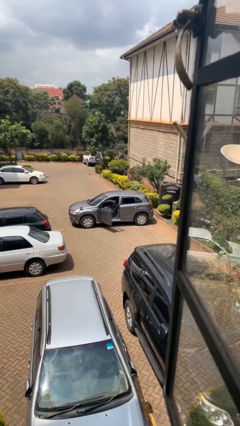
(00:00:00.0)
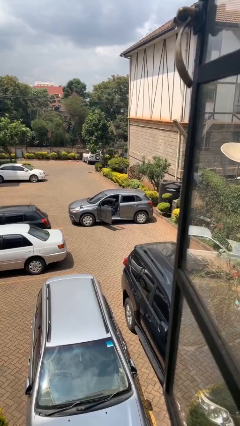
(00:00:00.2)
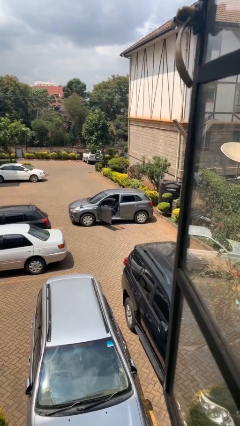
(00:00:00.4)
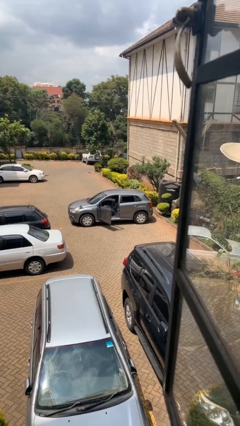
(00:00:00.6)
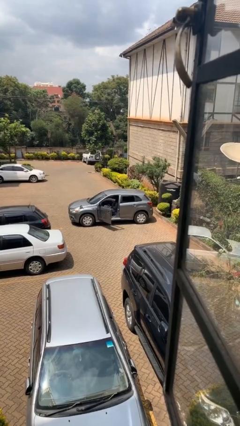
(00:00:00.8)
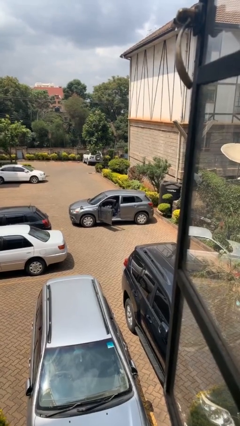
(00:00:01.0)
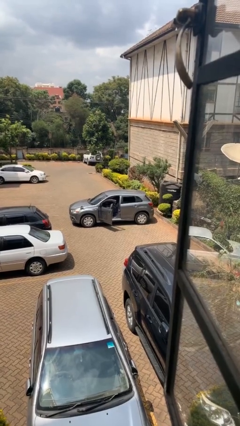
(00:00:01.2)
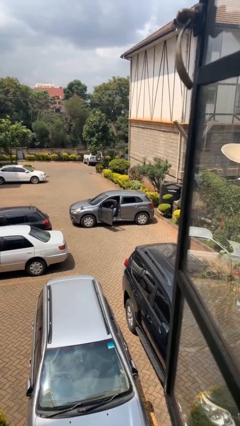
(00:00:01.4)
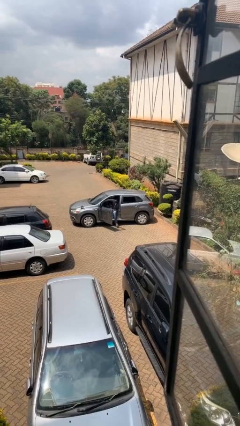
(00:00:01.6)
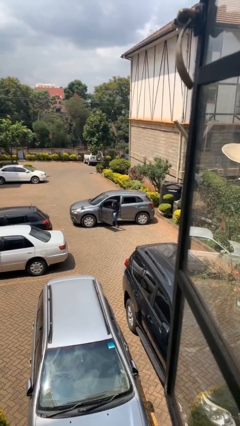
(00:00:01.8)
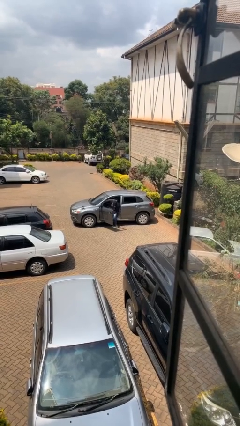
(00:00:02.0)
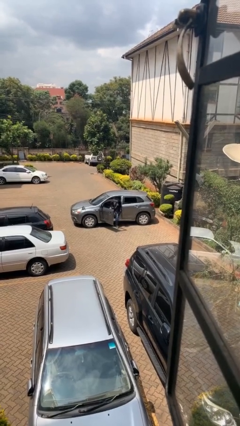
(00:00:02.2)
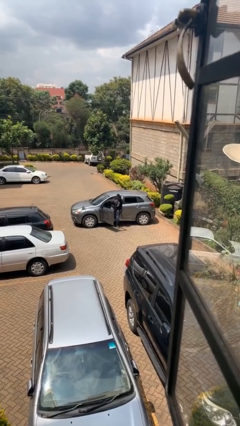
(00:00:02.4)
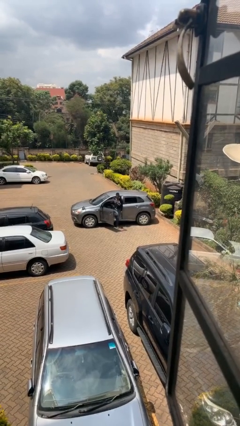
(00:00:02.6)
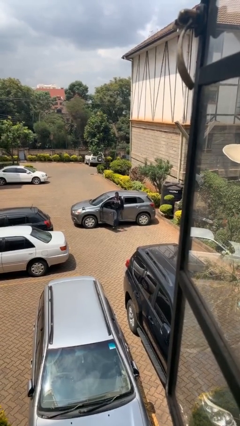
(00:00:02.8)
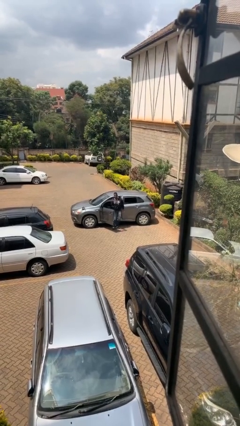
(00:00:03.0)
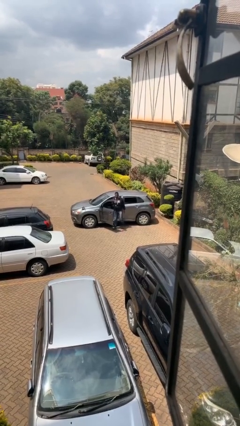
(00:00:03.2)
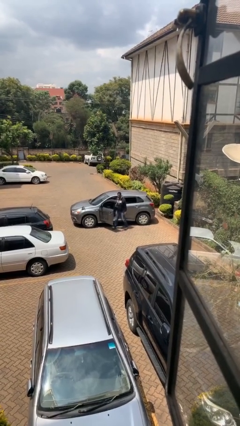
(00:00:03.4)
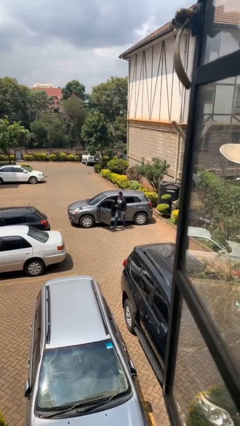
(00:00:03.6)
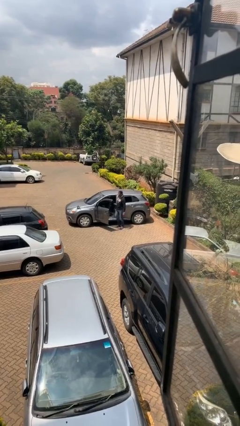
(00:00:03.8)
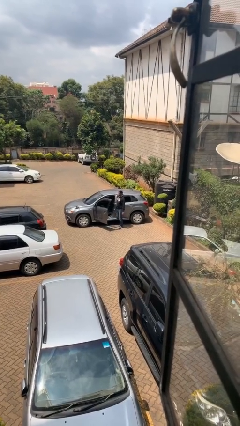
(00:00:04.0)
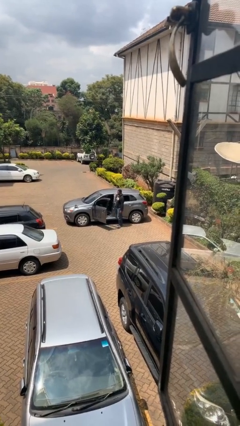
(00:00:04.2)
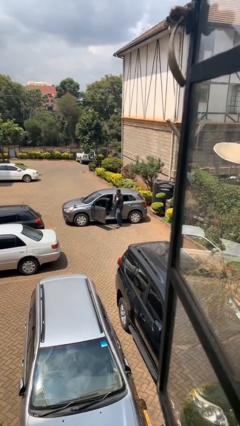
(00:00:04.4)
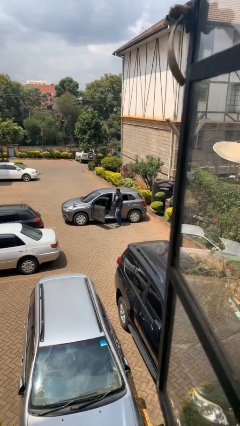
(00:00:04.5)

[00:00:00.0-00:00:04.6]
person exits car

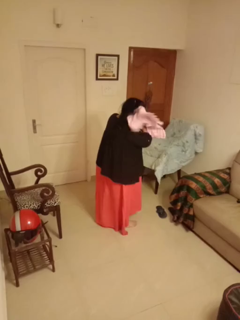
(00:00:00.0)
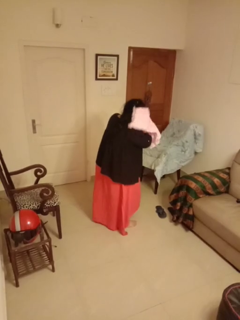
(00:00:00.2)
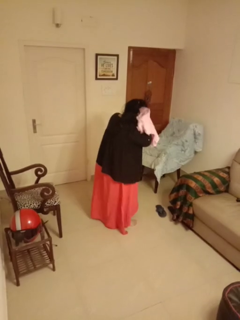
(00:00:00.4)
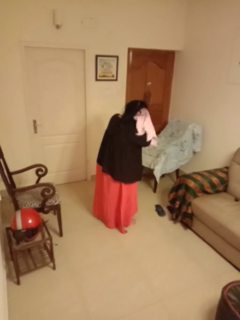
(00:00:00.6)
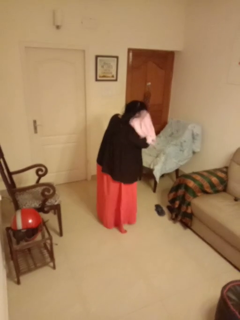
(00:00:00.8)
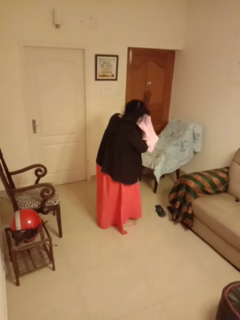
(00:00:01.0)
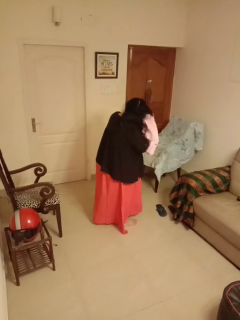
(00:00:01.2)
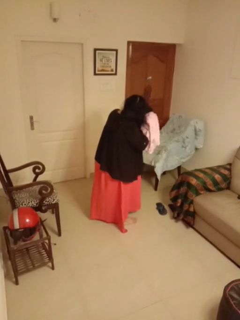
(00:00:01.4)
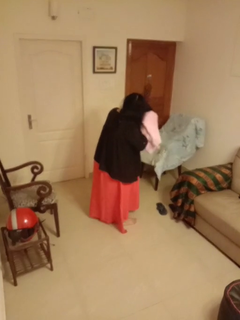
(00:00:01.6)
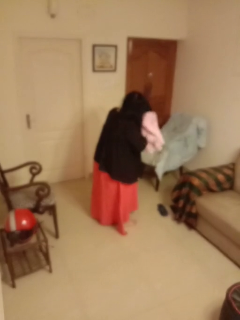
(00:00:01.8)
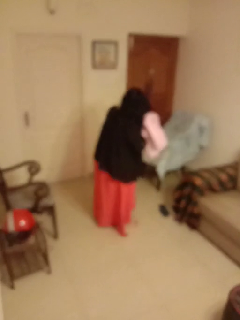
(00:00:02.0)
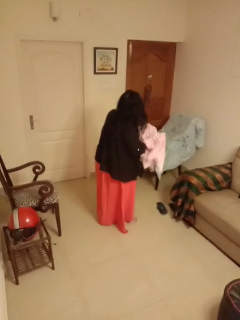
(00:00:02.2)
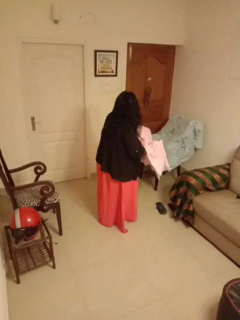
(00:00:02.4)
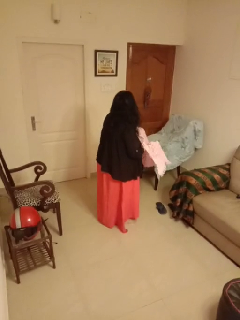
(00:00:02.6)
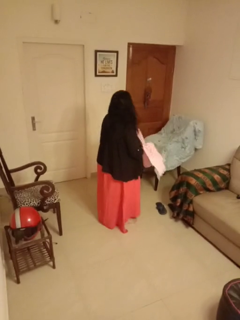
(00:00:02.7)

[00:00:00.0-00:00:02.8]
person dries hair with towel

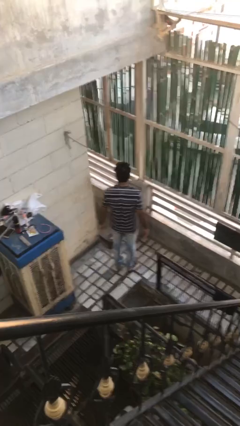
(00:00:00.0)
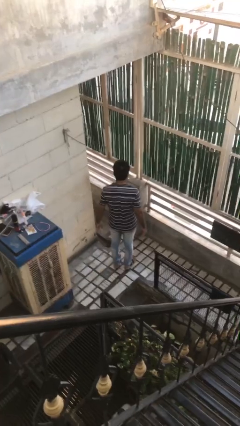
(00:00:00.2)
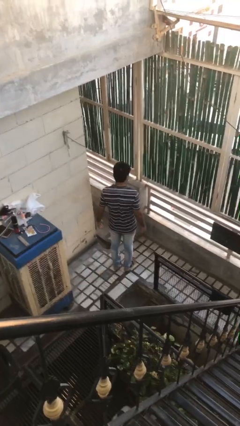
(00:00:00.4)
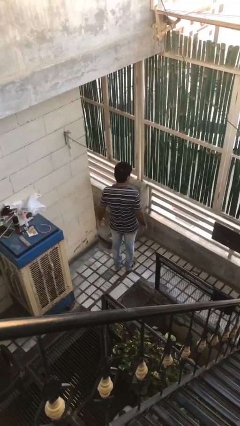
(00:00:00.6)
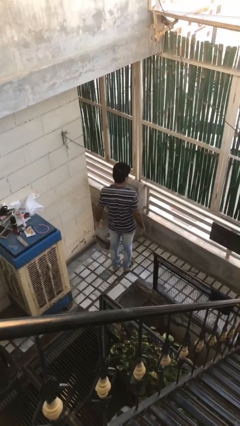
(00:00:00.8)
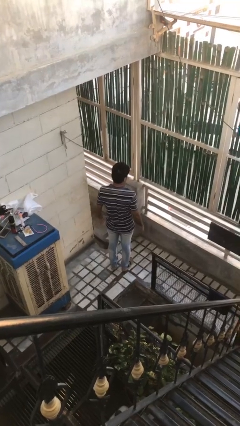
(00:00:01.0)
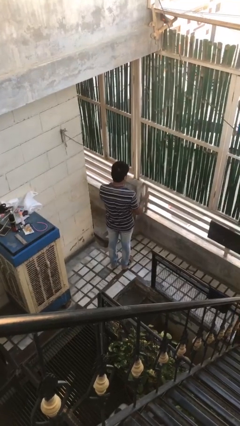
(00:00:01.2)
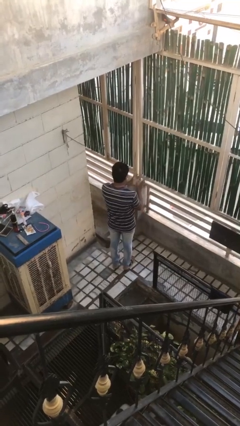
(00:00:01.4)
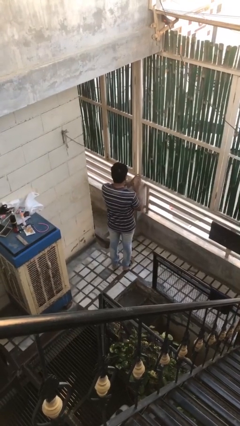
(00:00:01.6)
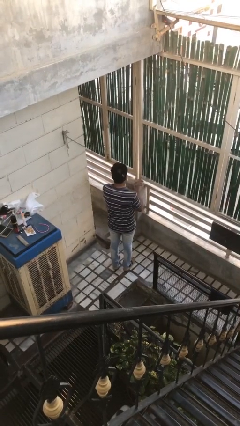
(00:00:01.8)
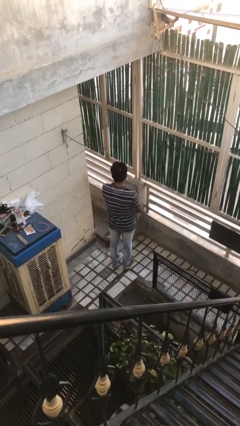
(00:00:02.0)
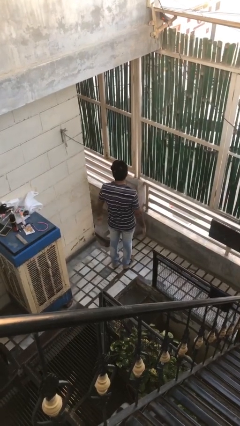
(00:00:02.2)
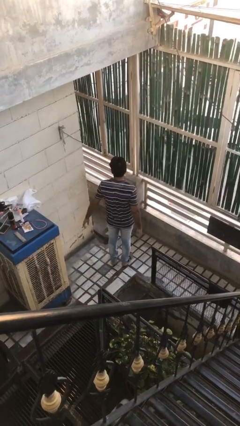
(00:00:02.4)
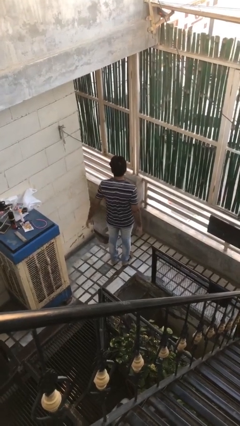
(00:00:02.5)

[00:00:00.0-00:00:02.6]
person claps hands

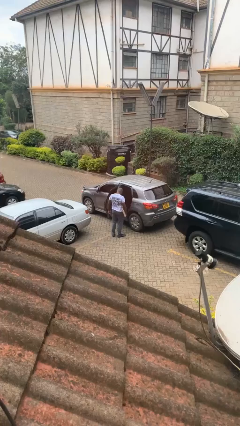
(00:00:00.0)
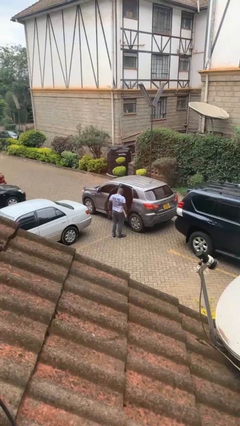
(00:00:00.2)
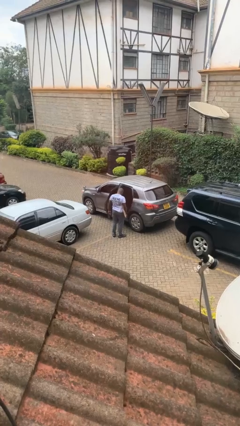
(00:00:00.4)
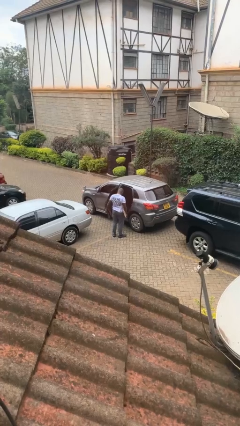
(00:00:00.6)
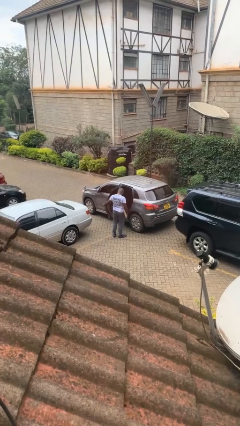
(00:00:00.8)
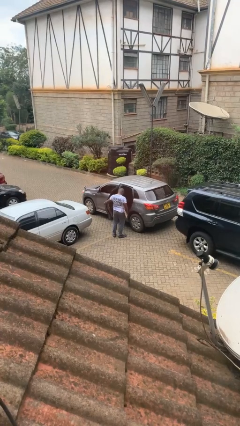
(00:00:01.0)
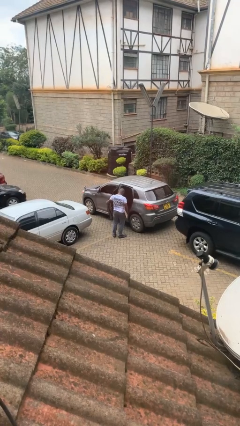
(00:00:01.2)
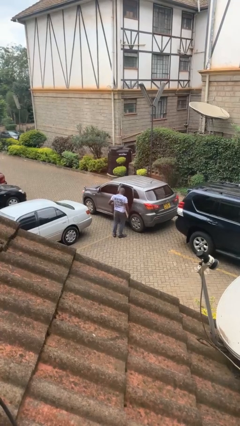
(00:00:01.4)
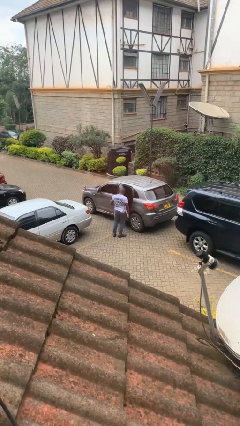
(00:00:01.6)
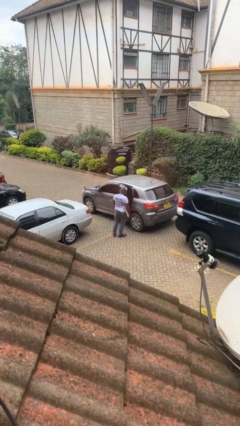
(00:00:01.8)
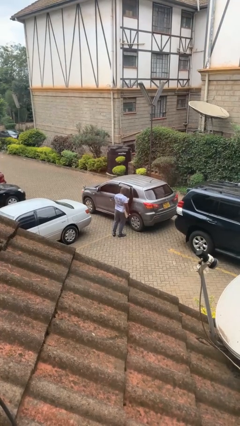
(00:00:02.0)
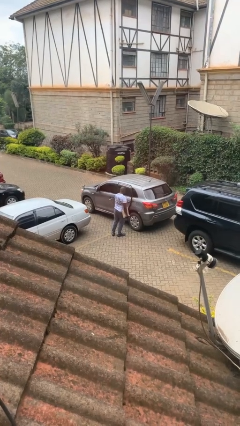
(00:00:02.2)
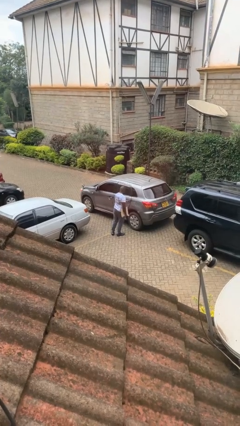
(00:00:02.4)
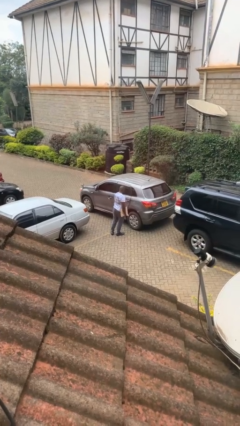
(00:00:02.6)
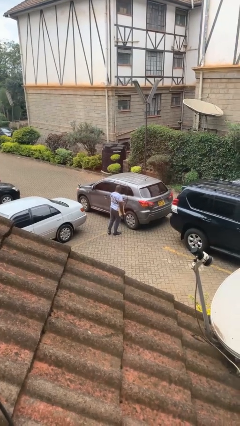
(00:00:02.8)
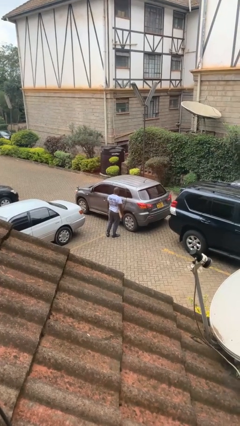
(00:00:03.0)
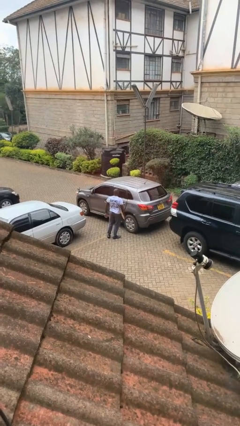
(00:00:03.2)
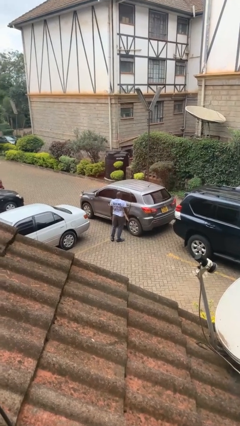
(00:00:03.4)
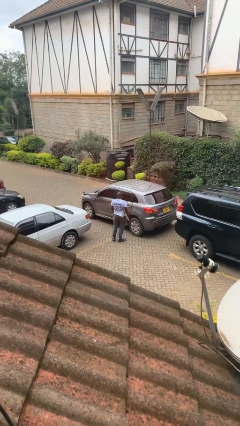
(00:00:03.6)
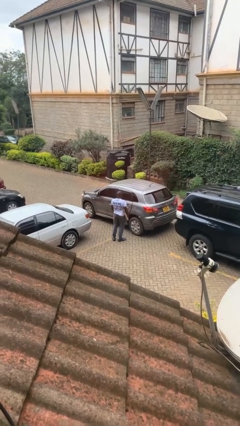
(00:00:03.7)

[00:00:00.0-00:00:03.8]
person closes car door

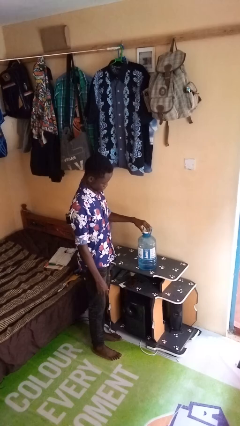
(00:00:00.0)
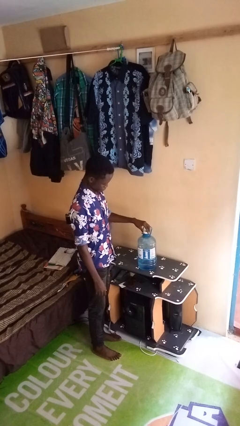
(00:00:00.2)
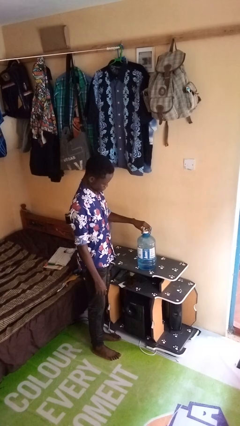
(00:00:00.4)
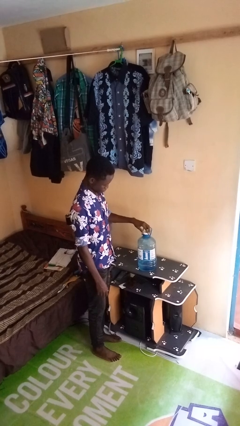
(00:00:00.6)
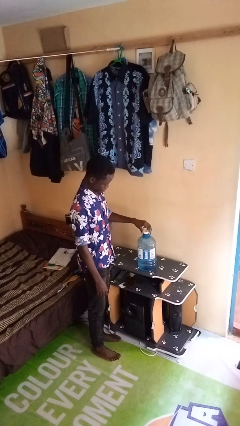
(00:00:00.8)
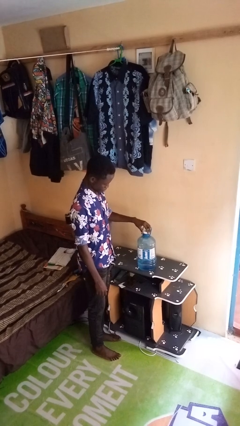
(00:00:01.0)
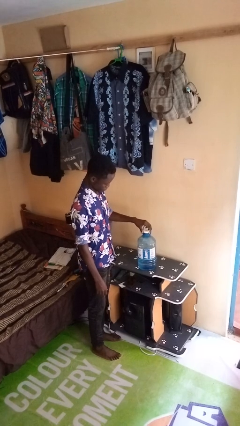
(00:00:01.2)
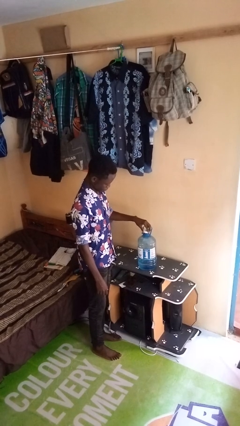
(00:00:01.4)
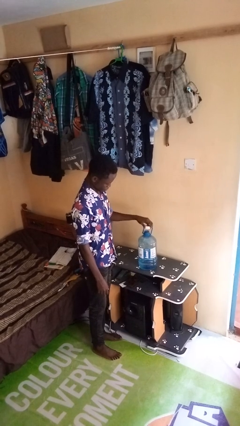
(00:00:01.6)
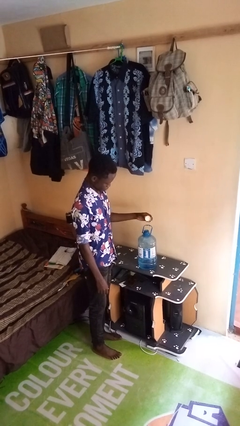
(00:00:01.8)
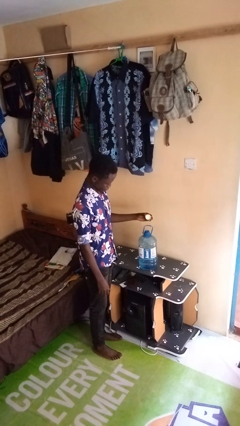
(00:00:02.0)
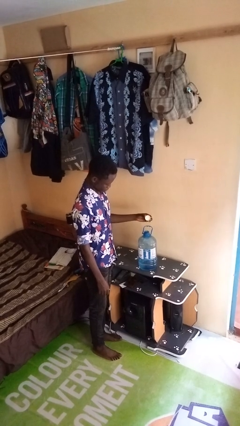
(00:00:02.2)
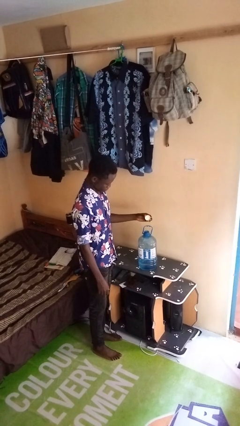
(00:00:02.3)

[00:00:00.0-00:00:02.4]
person unscrews lid from bottle

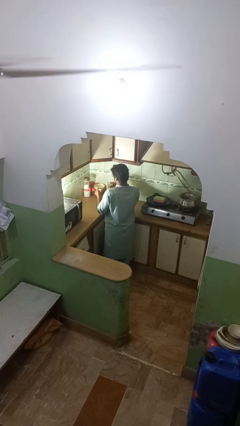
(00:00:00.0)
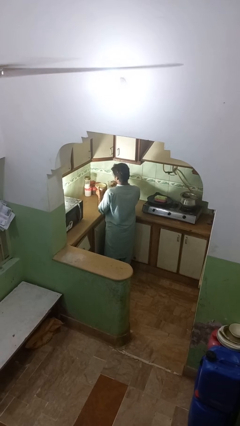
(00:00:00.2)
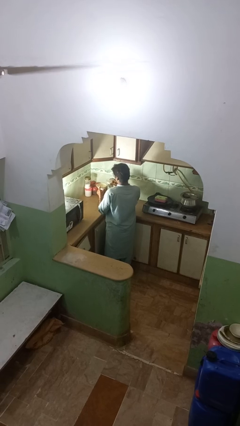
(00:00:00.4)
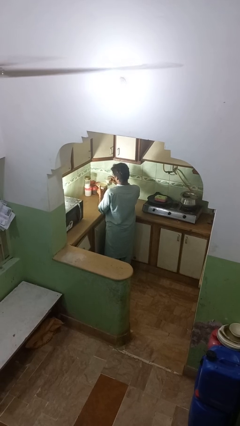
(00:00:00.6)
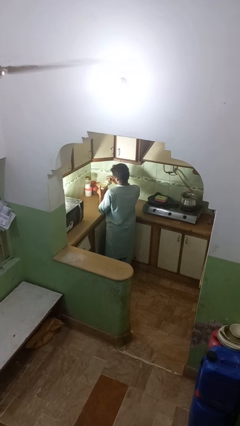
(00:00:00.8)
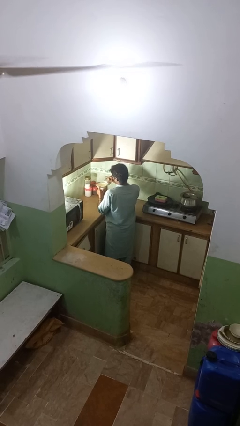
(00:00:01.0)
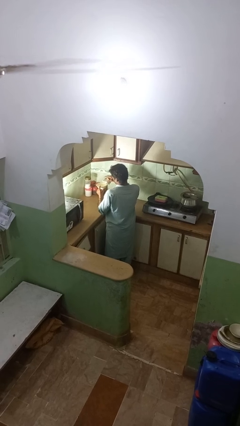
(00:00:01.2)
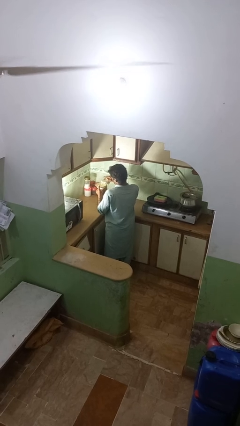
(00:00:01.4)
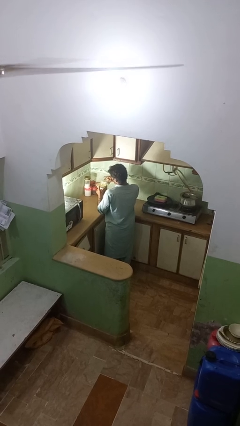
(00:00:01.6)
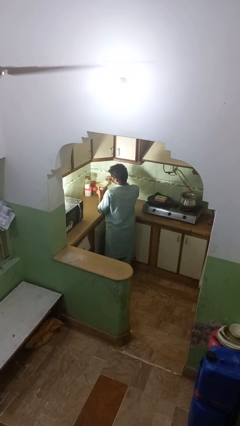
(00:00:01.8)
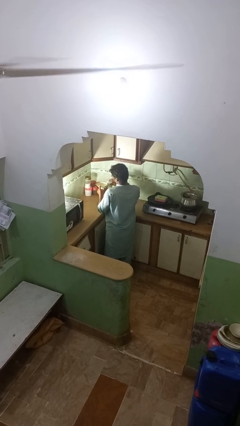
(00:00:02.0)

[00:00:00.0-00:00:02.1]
person pours into bowl

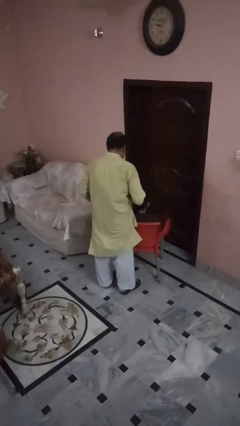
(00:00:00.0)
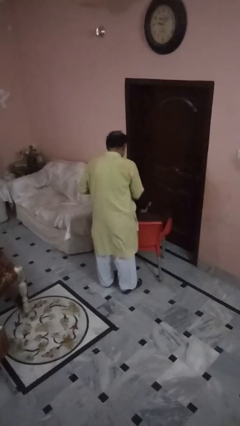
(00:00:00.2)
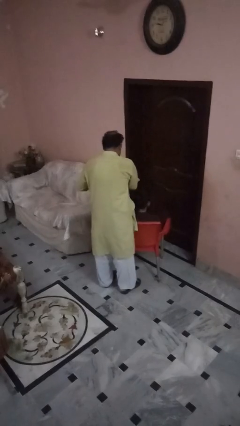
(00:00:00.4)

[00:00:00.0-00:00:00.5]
person covers friend with blanket
